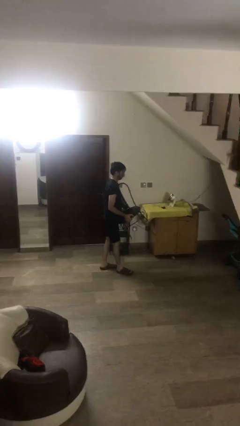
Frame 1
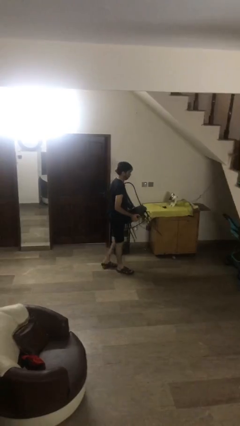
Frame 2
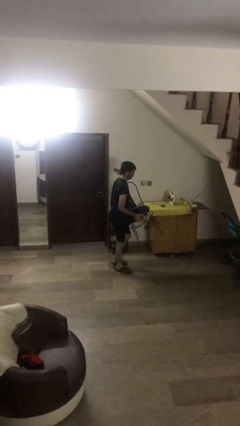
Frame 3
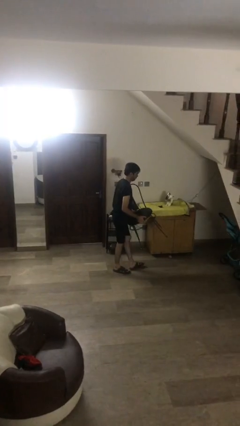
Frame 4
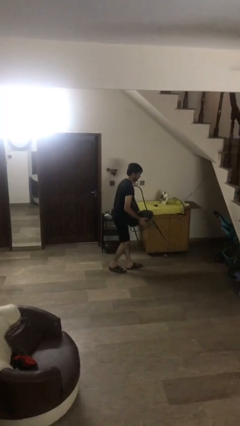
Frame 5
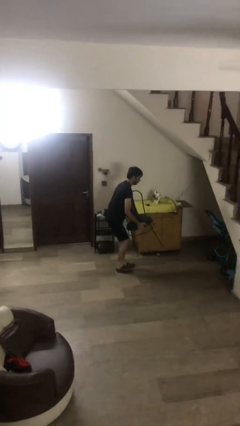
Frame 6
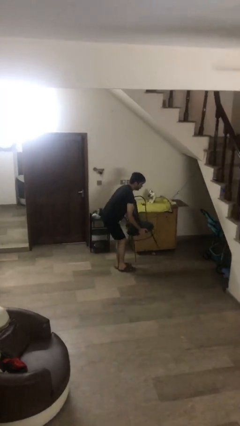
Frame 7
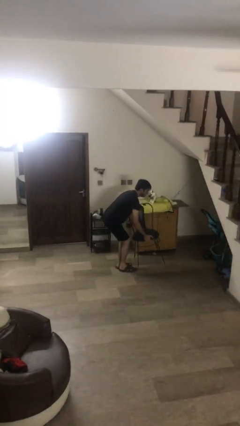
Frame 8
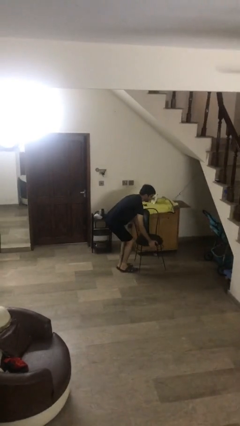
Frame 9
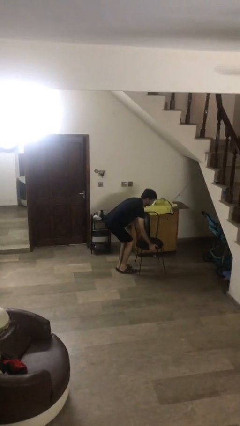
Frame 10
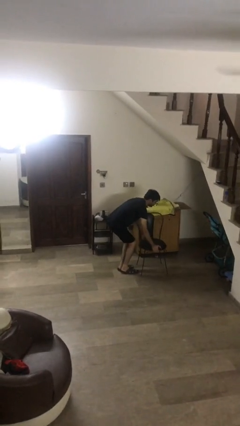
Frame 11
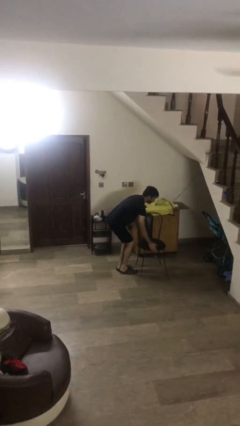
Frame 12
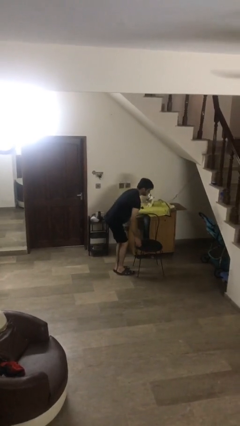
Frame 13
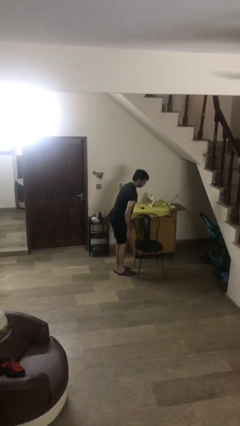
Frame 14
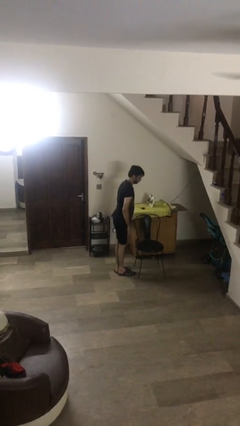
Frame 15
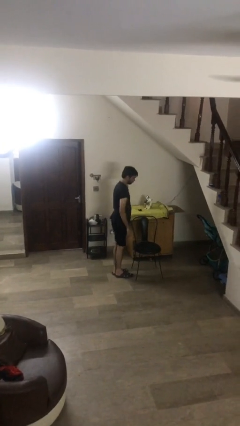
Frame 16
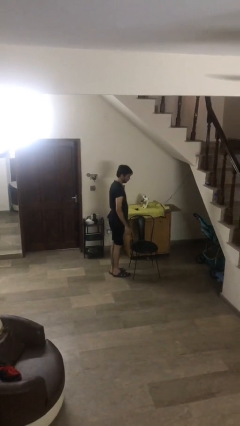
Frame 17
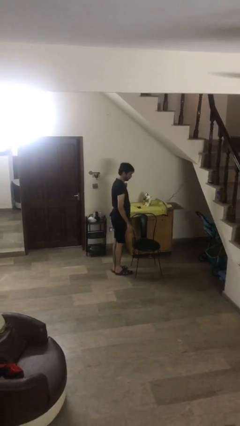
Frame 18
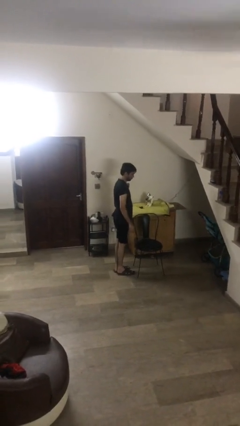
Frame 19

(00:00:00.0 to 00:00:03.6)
person puts down object on floor

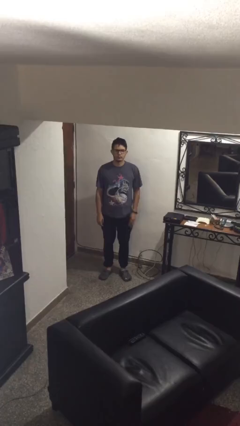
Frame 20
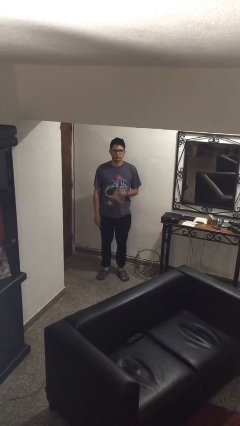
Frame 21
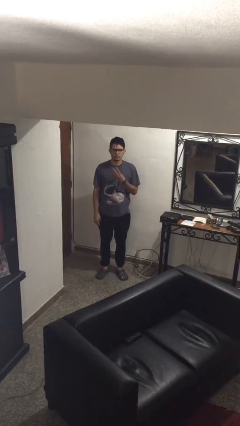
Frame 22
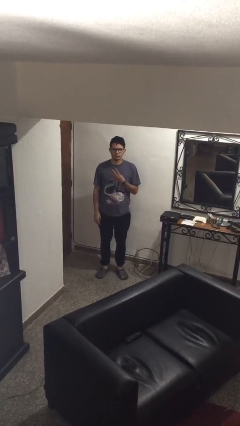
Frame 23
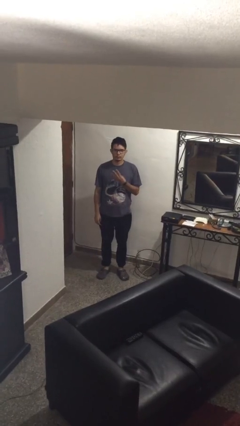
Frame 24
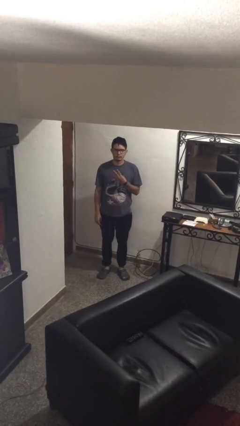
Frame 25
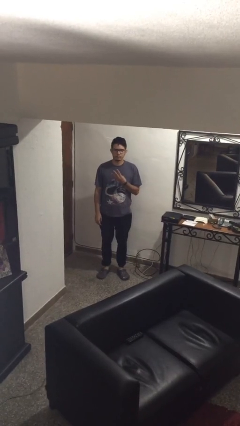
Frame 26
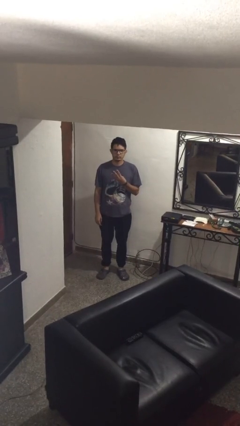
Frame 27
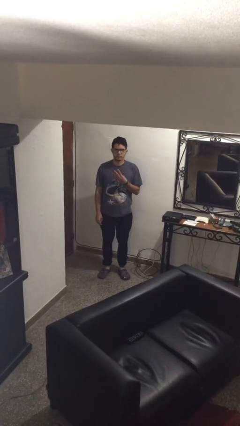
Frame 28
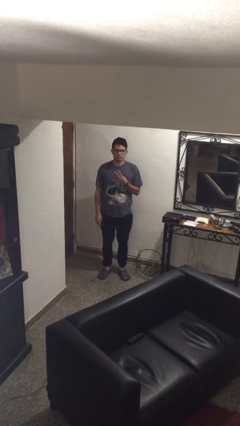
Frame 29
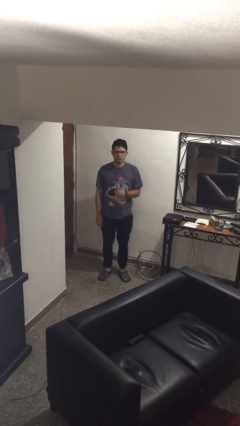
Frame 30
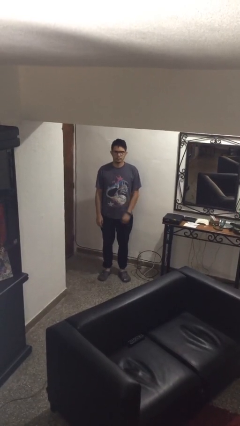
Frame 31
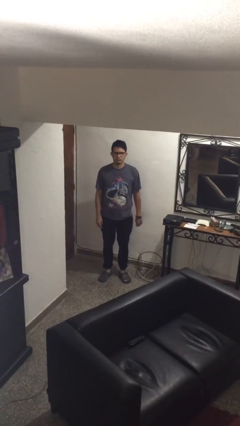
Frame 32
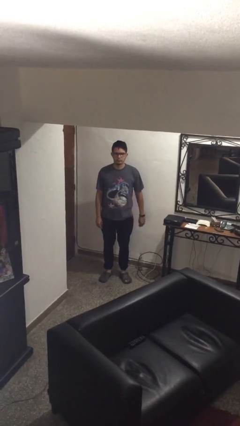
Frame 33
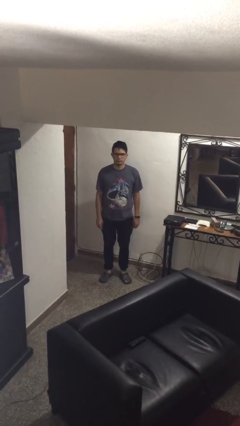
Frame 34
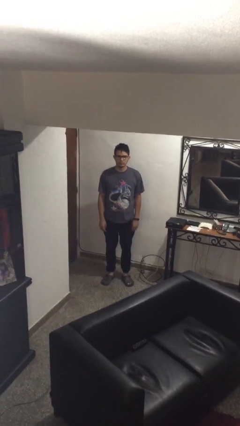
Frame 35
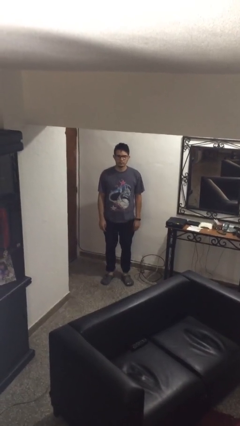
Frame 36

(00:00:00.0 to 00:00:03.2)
person gestures number three

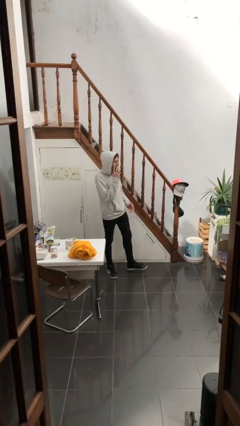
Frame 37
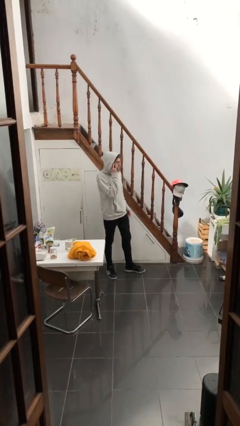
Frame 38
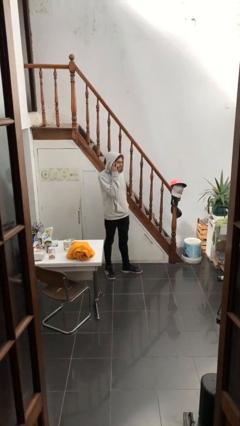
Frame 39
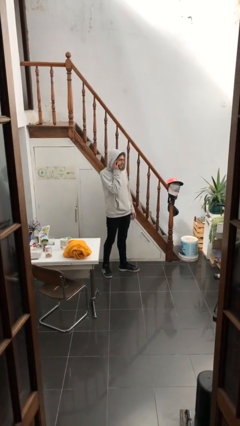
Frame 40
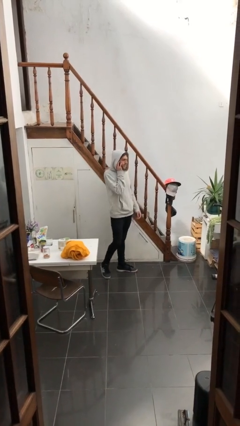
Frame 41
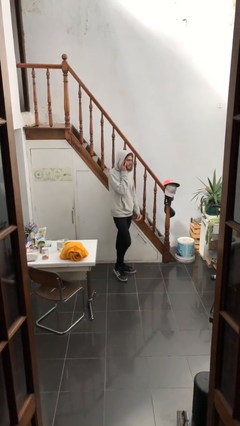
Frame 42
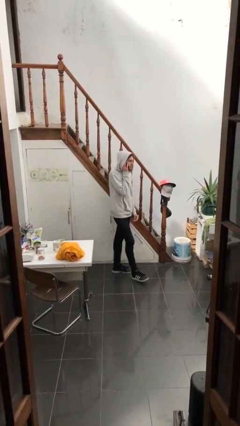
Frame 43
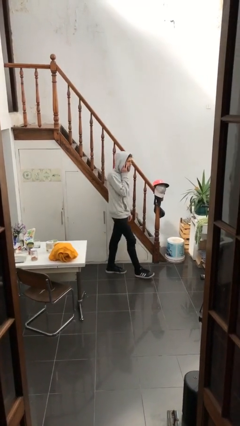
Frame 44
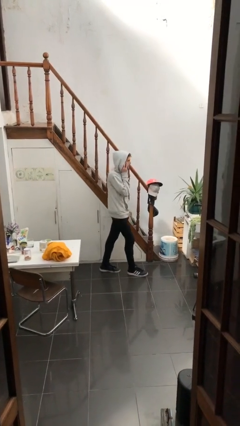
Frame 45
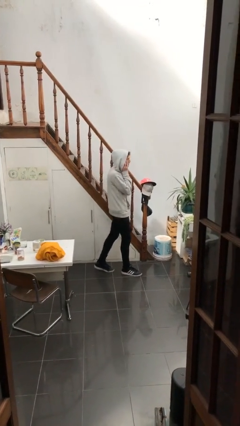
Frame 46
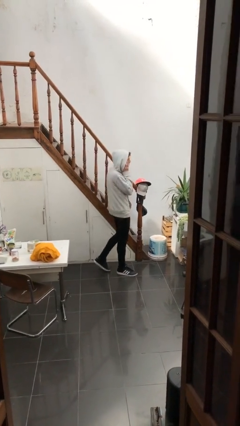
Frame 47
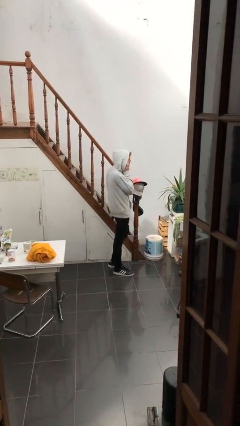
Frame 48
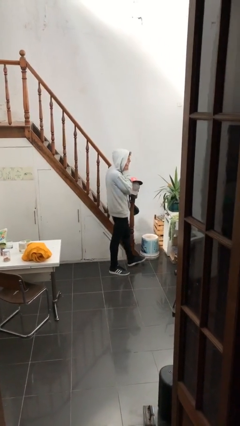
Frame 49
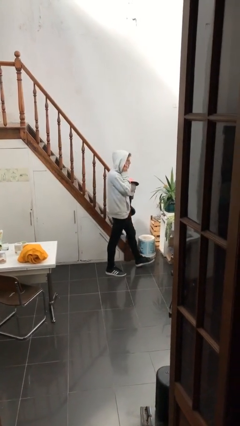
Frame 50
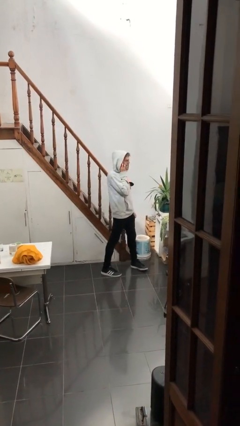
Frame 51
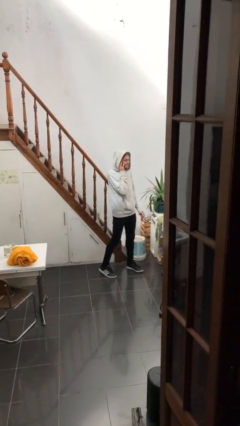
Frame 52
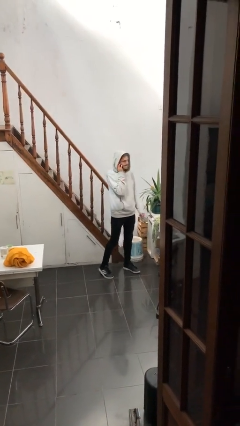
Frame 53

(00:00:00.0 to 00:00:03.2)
person talks on phone

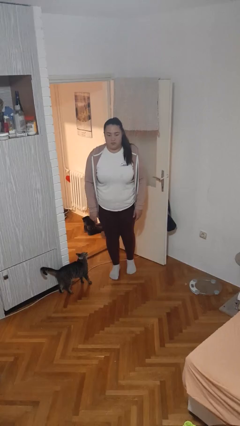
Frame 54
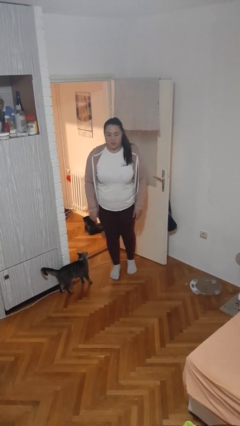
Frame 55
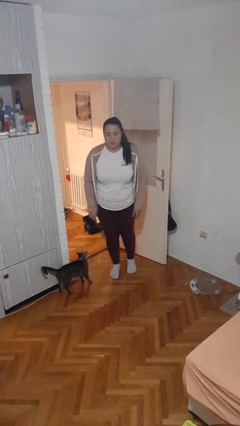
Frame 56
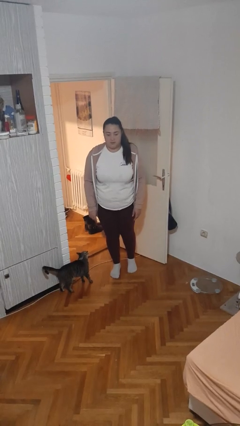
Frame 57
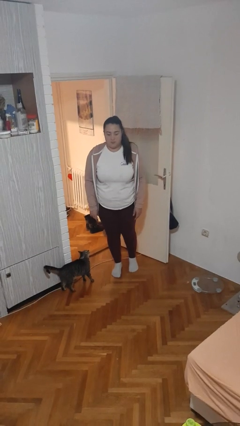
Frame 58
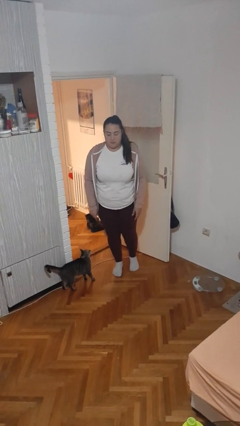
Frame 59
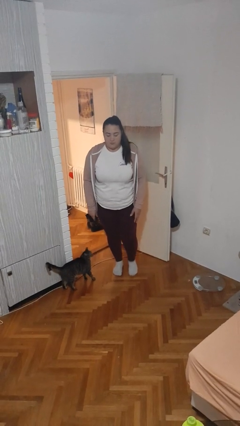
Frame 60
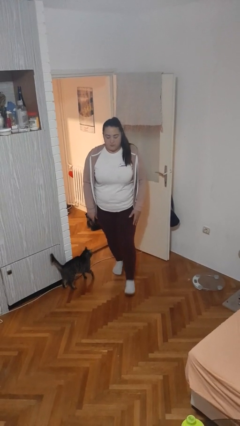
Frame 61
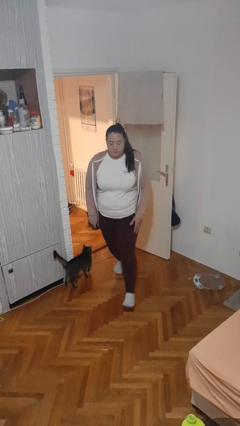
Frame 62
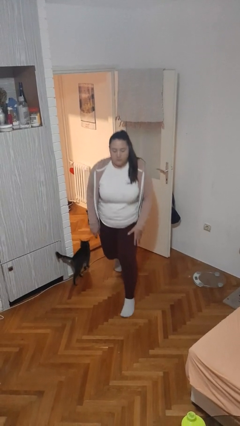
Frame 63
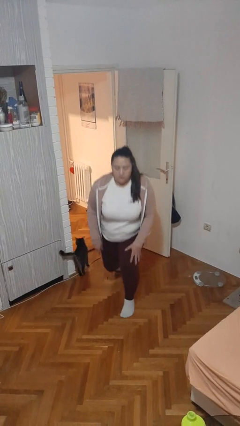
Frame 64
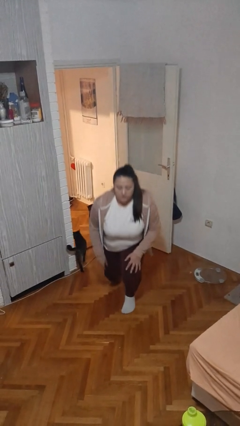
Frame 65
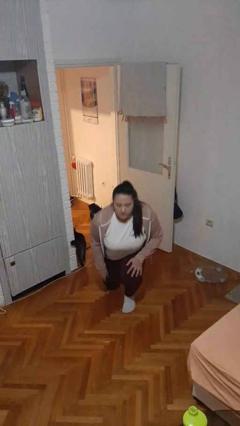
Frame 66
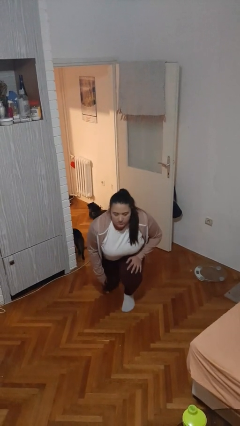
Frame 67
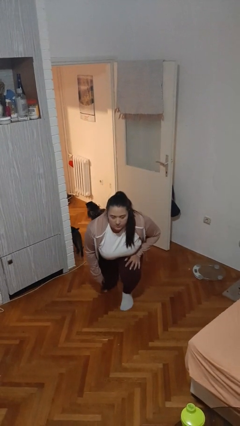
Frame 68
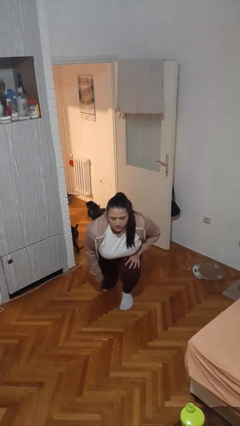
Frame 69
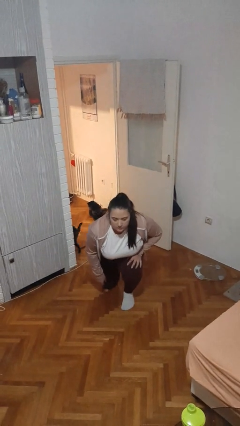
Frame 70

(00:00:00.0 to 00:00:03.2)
person kneels

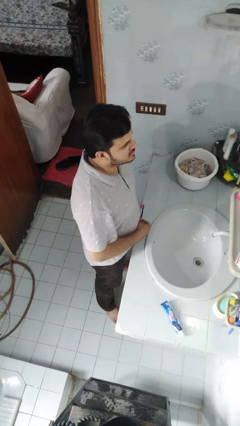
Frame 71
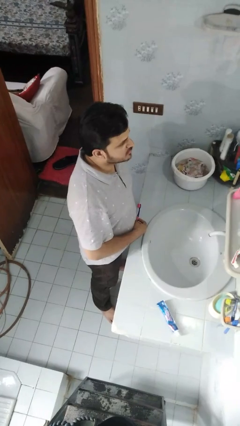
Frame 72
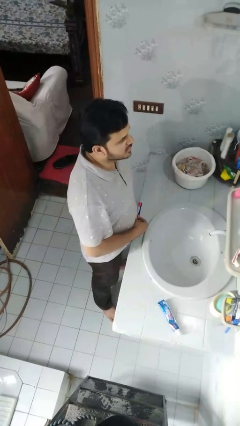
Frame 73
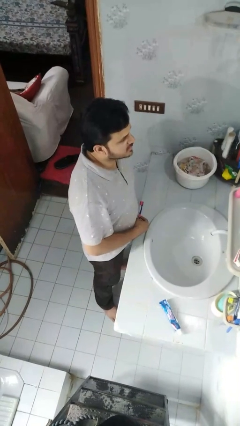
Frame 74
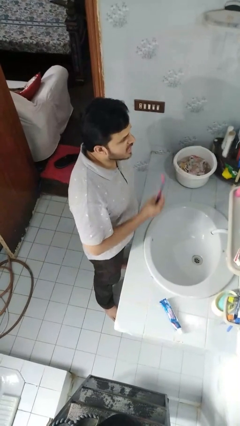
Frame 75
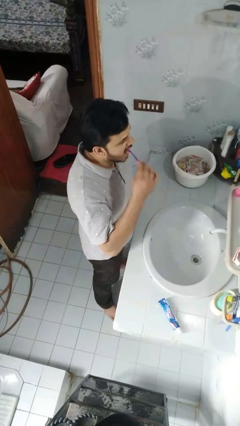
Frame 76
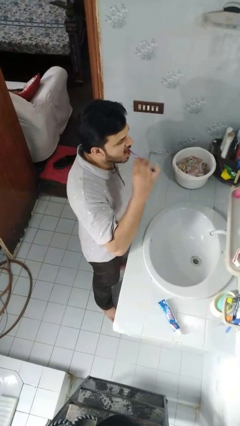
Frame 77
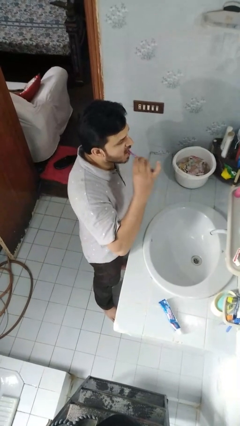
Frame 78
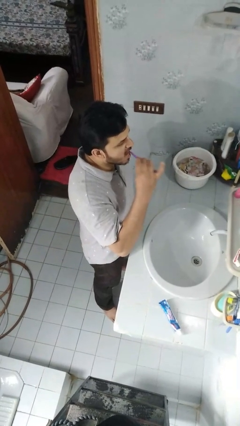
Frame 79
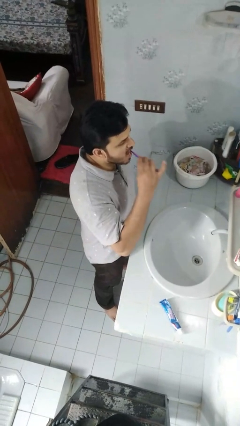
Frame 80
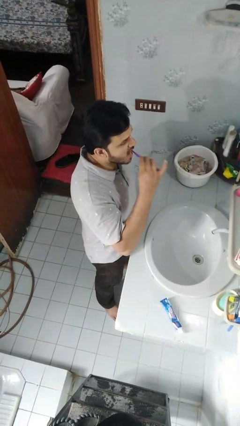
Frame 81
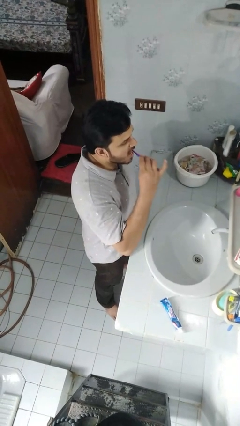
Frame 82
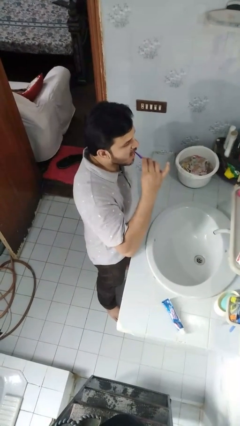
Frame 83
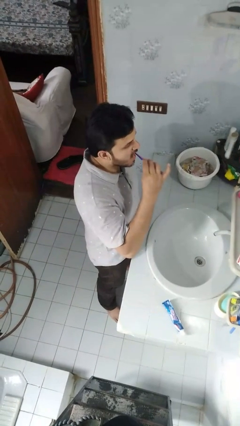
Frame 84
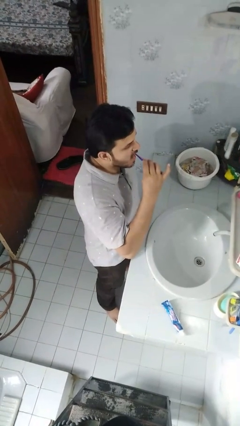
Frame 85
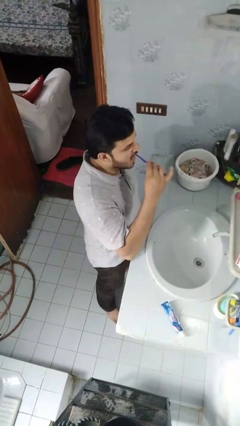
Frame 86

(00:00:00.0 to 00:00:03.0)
person brushes teeth

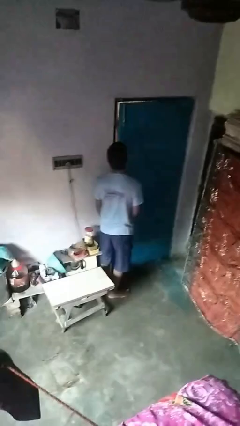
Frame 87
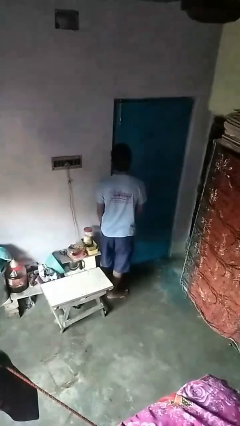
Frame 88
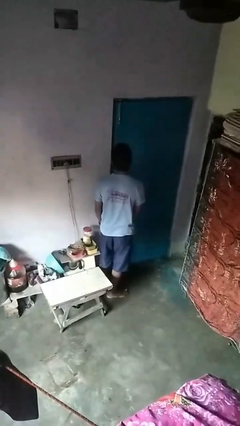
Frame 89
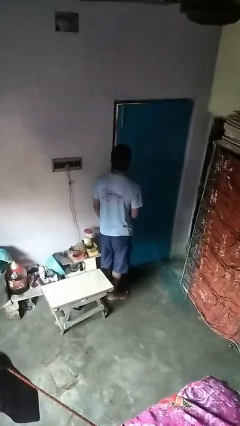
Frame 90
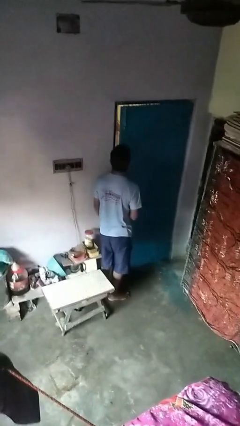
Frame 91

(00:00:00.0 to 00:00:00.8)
person closes facility door

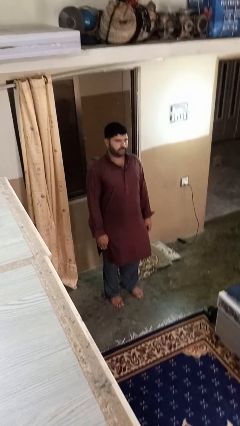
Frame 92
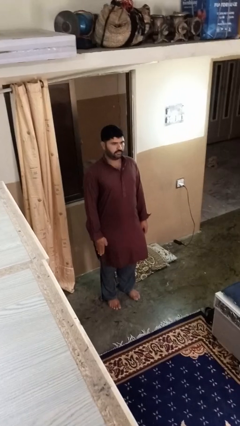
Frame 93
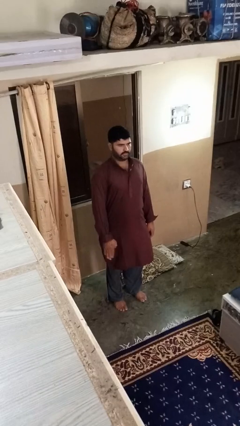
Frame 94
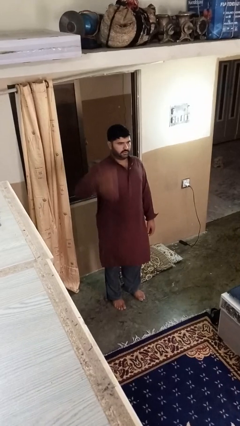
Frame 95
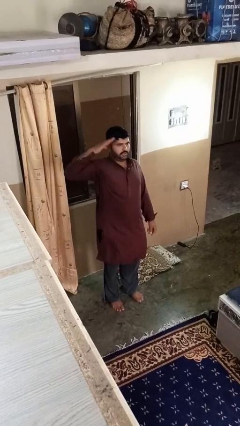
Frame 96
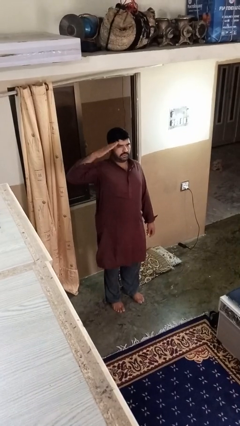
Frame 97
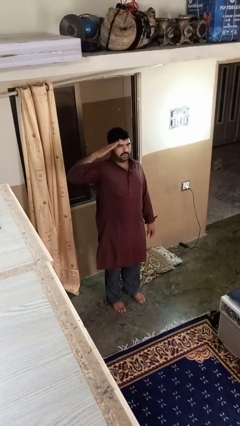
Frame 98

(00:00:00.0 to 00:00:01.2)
person salutes
